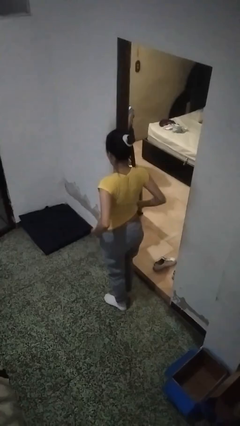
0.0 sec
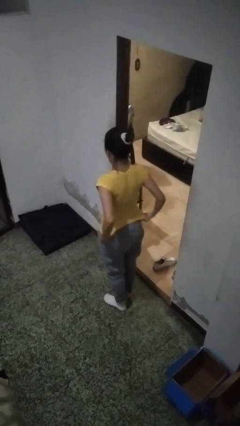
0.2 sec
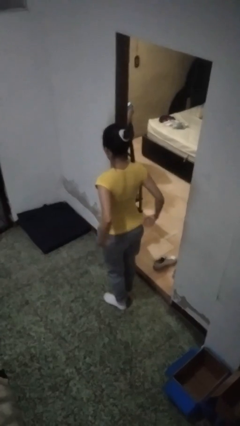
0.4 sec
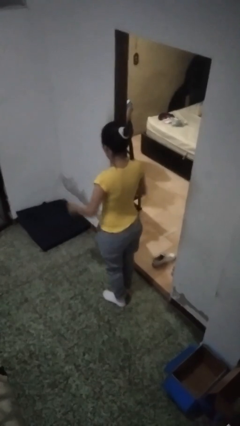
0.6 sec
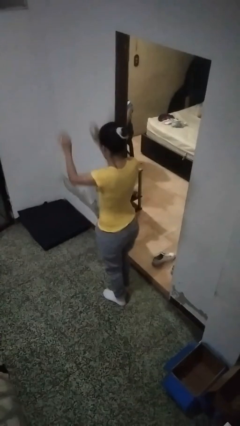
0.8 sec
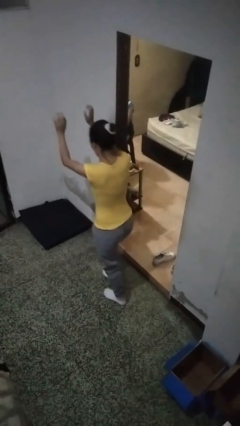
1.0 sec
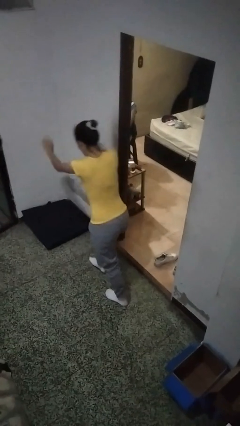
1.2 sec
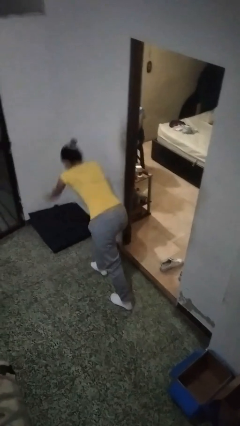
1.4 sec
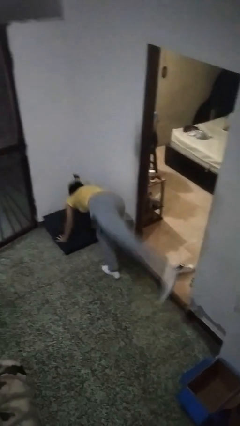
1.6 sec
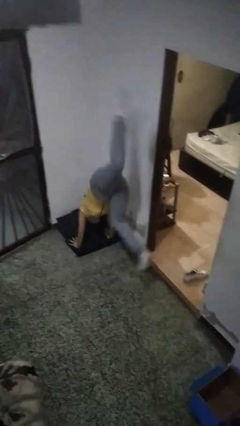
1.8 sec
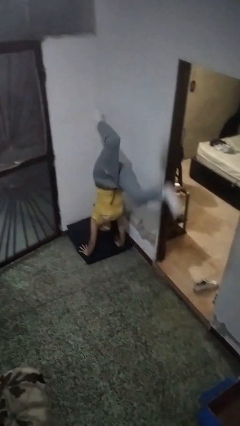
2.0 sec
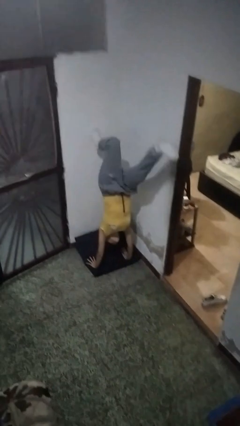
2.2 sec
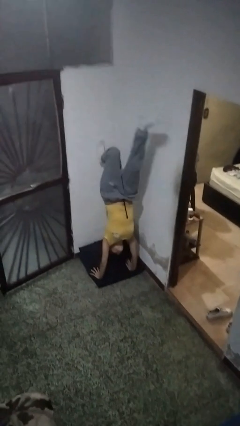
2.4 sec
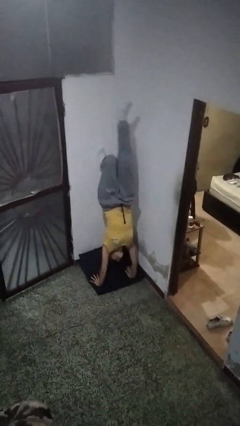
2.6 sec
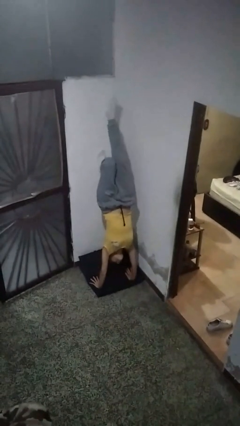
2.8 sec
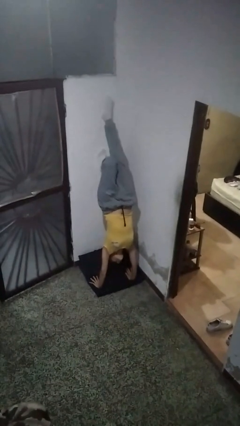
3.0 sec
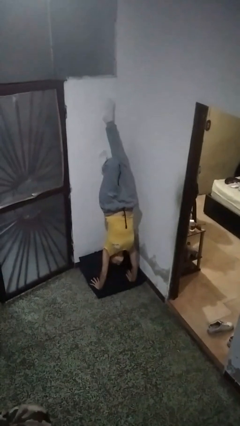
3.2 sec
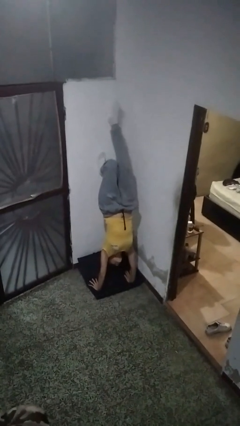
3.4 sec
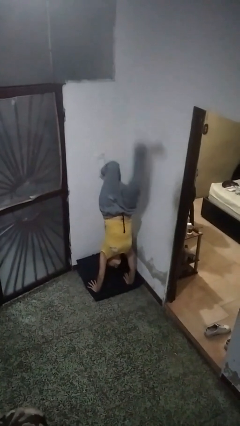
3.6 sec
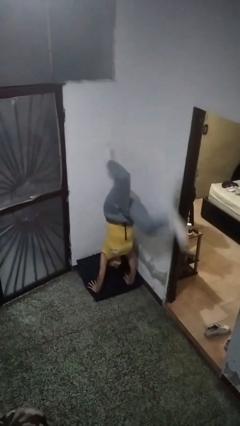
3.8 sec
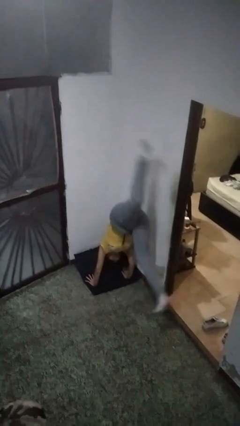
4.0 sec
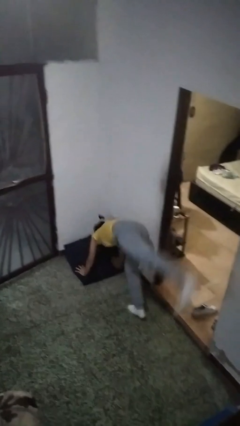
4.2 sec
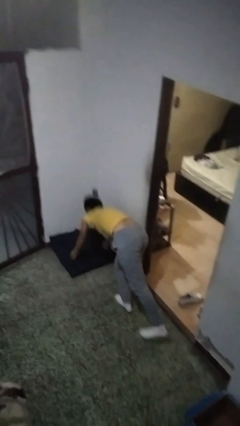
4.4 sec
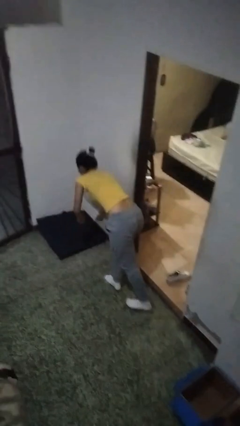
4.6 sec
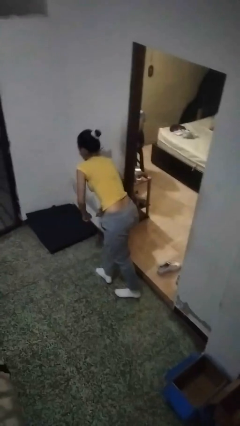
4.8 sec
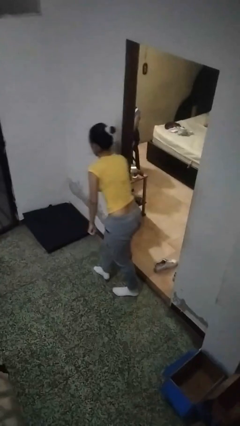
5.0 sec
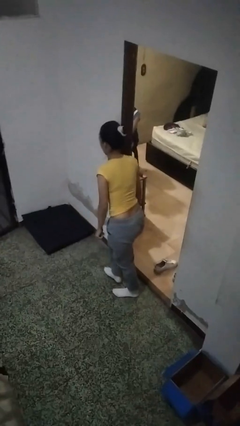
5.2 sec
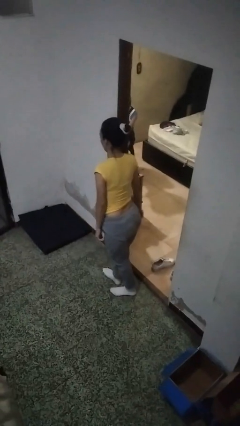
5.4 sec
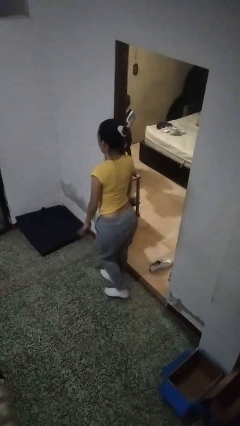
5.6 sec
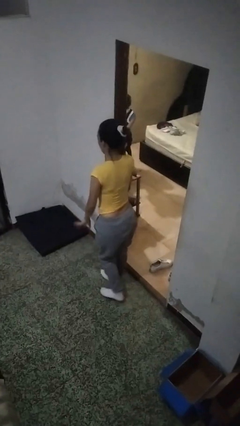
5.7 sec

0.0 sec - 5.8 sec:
person handstand

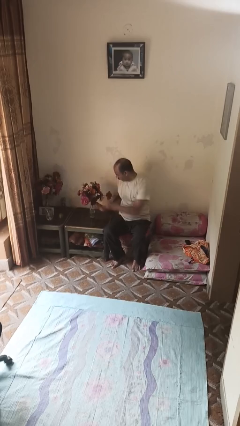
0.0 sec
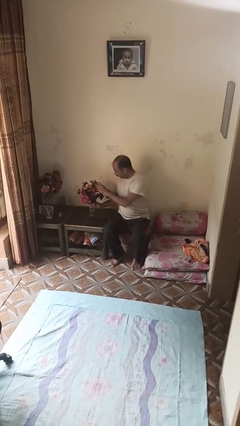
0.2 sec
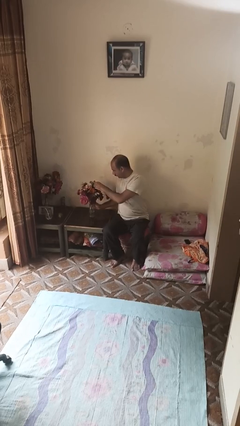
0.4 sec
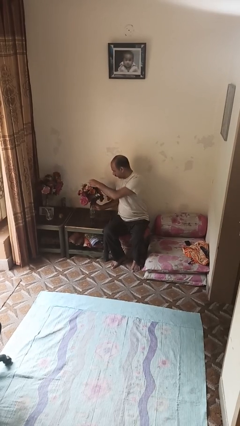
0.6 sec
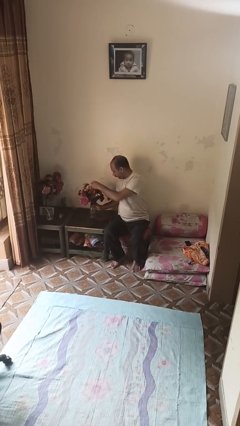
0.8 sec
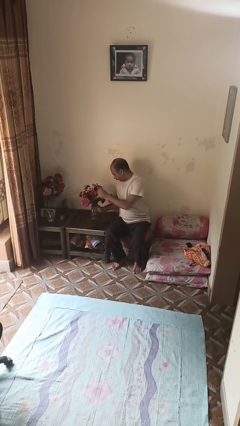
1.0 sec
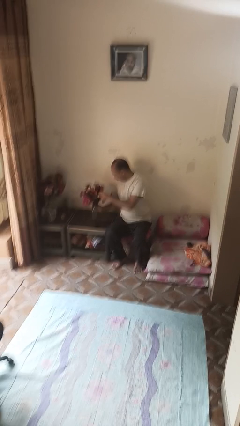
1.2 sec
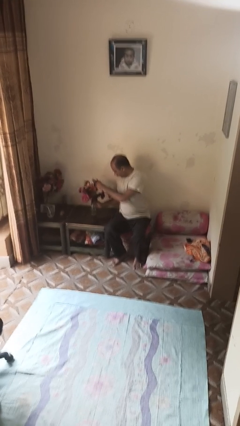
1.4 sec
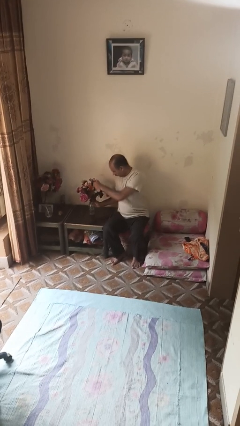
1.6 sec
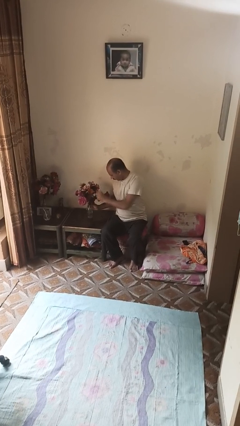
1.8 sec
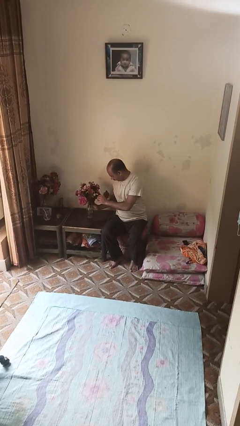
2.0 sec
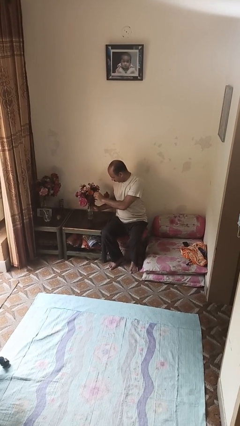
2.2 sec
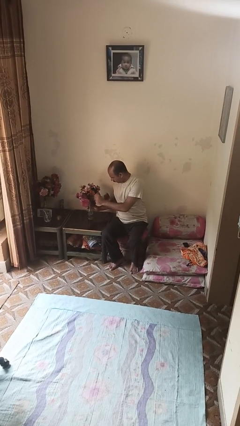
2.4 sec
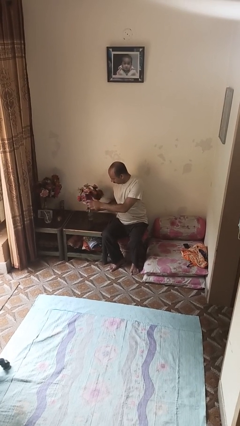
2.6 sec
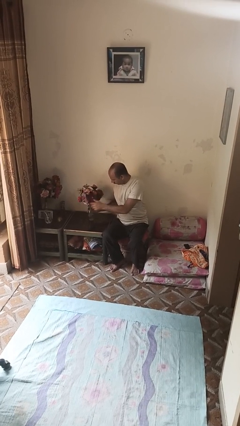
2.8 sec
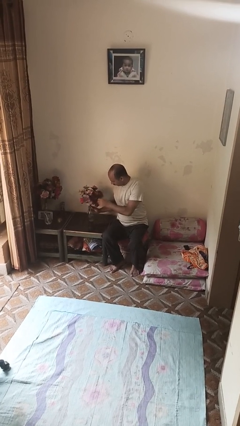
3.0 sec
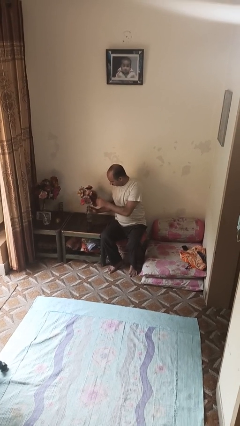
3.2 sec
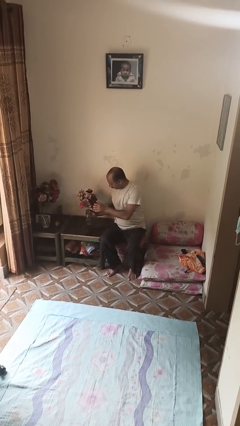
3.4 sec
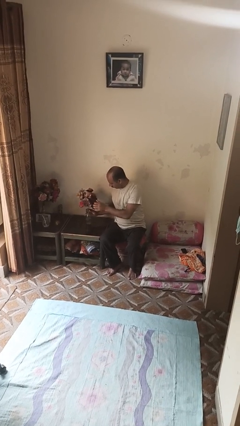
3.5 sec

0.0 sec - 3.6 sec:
person arranges flowers in vase

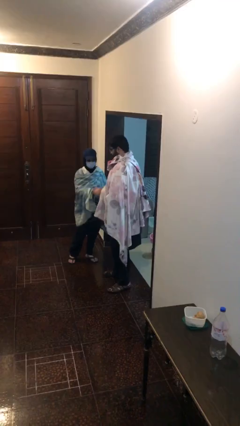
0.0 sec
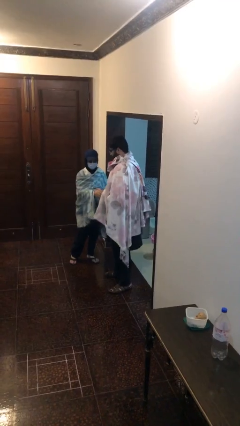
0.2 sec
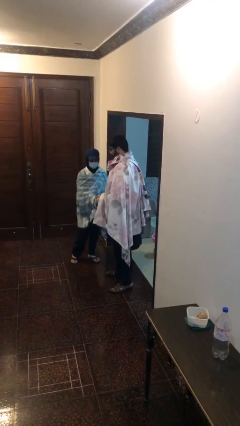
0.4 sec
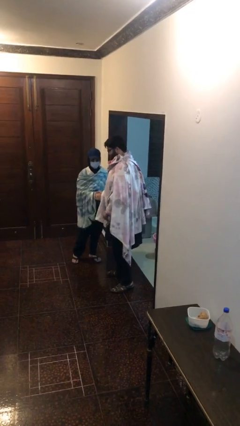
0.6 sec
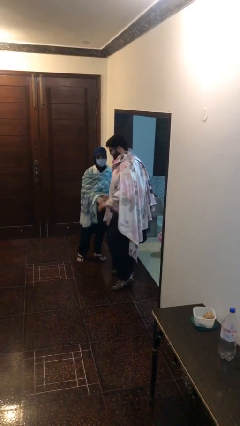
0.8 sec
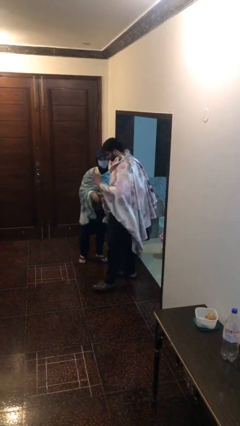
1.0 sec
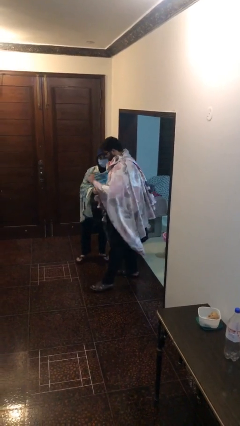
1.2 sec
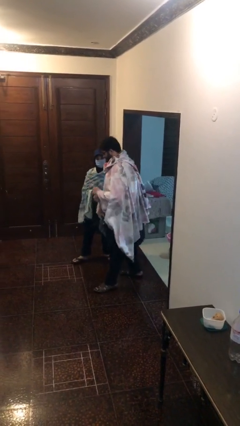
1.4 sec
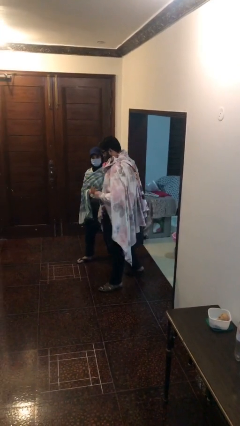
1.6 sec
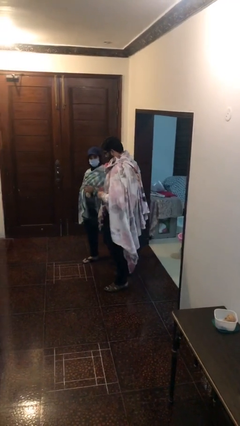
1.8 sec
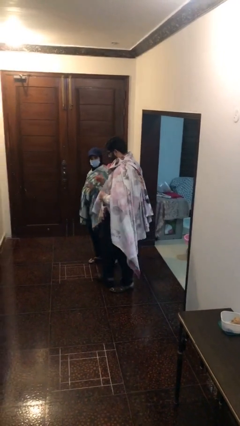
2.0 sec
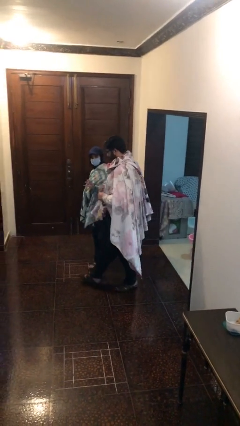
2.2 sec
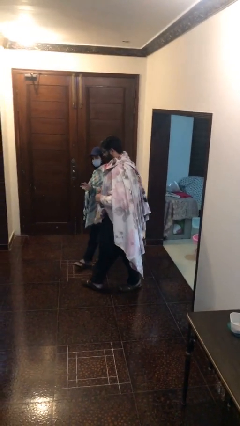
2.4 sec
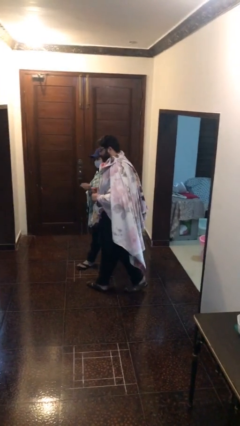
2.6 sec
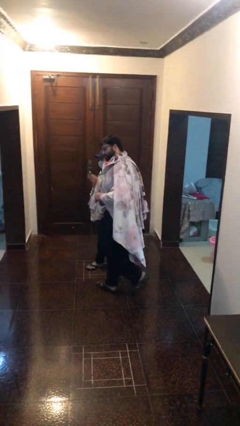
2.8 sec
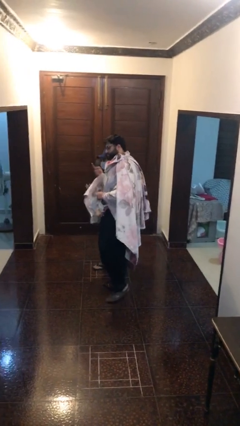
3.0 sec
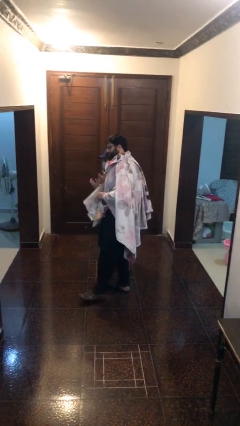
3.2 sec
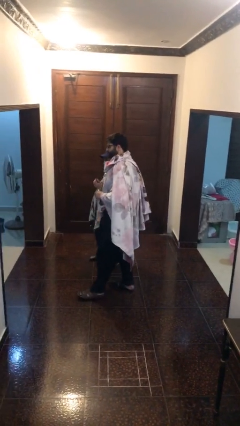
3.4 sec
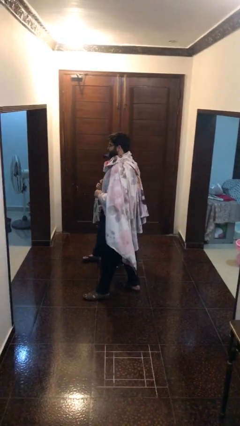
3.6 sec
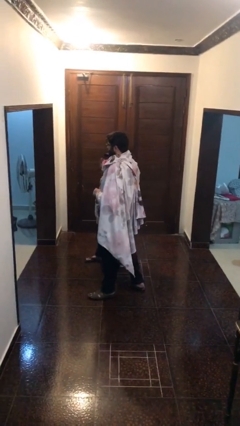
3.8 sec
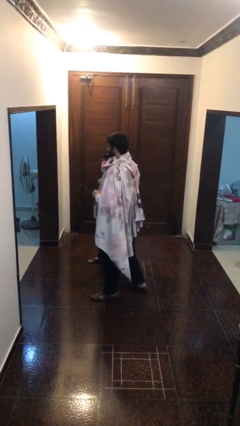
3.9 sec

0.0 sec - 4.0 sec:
person talks to person

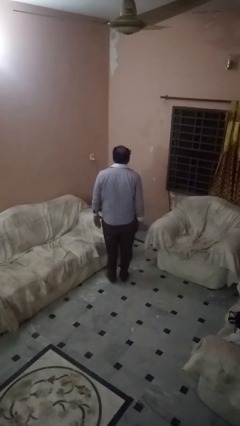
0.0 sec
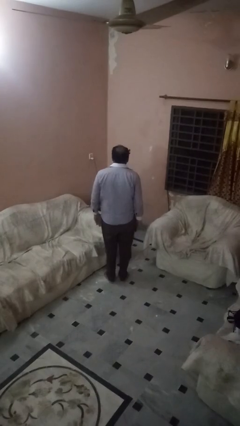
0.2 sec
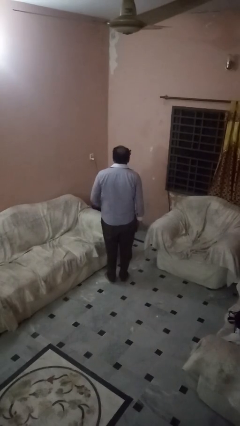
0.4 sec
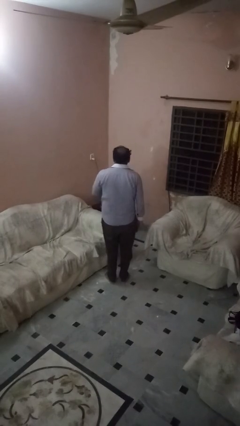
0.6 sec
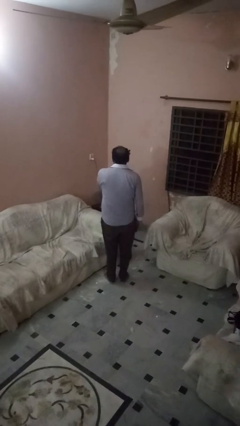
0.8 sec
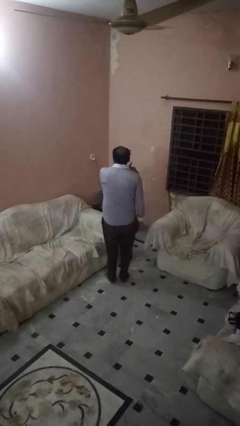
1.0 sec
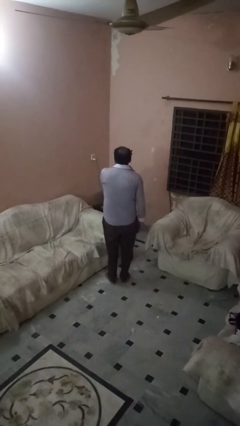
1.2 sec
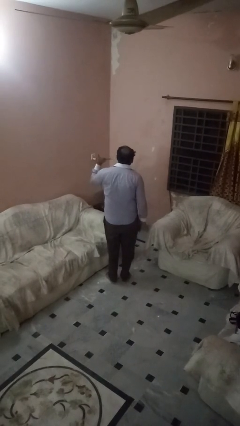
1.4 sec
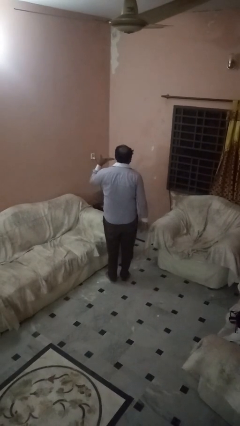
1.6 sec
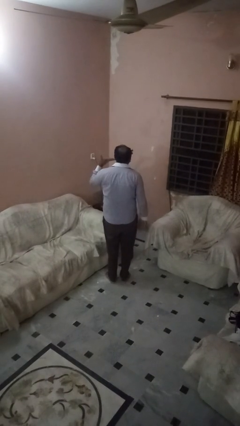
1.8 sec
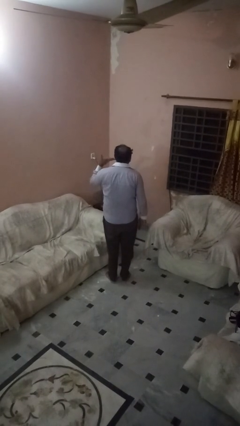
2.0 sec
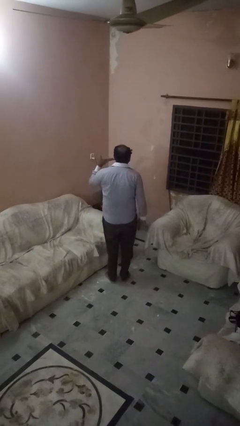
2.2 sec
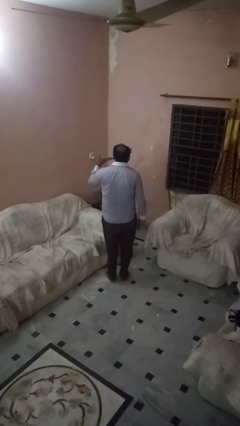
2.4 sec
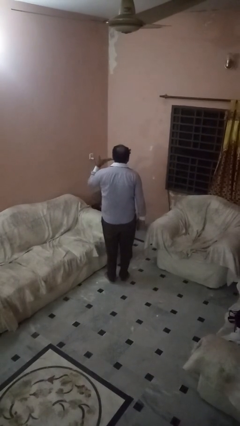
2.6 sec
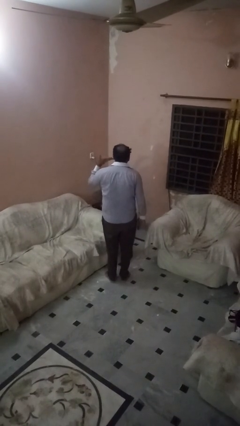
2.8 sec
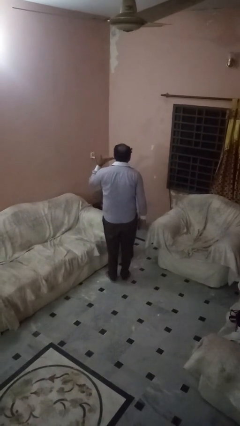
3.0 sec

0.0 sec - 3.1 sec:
person gestures cut

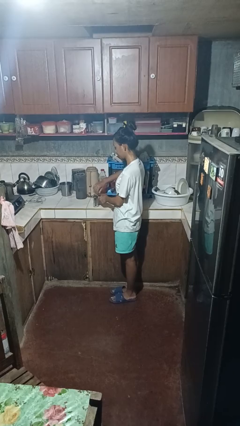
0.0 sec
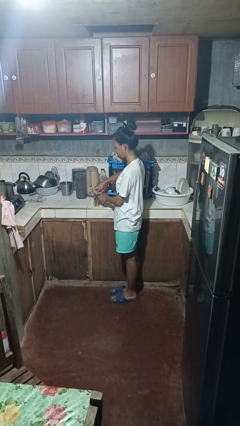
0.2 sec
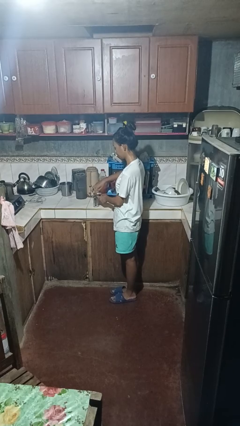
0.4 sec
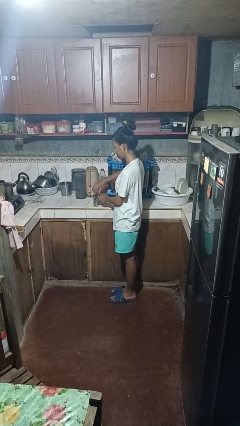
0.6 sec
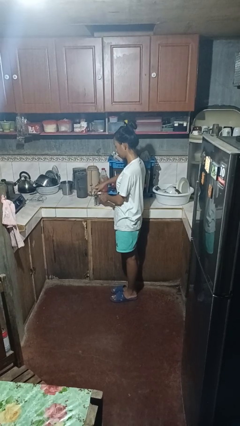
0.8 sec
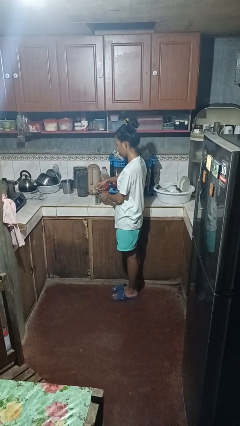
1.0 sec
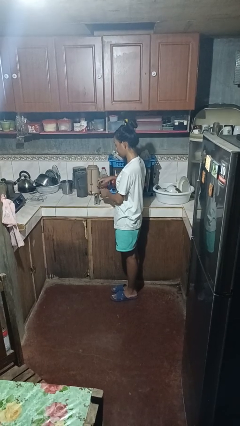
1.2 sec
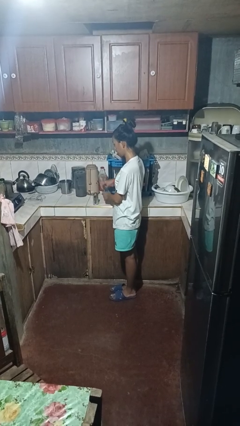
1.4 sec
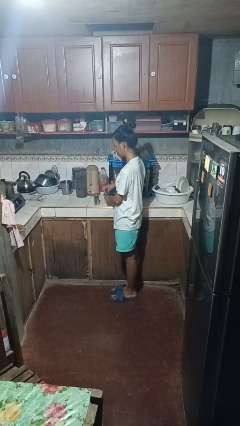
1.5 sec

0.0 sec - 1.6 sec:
person opens can with can opener
